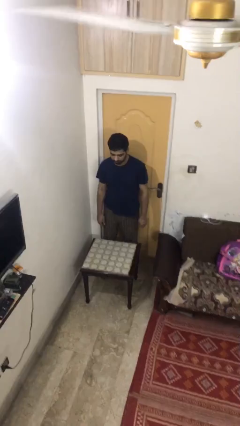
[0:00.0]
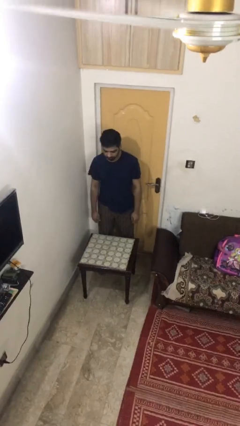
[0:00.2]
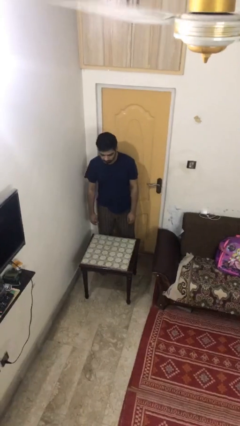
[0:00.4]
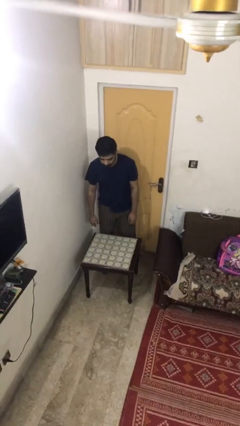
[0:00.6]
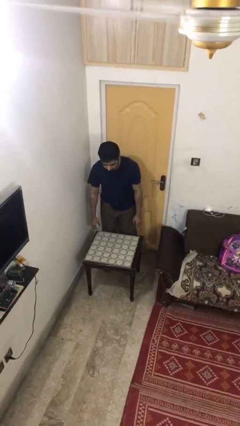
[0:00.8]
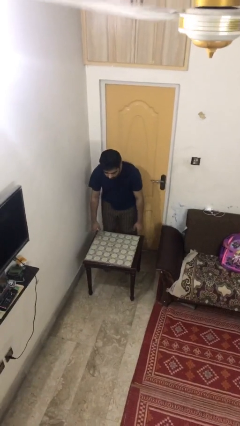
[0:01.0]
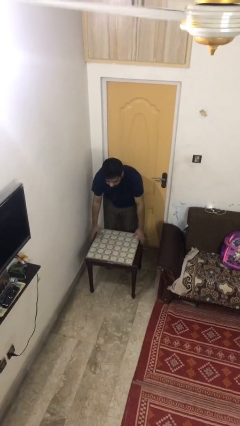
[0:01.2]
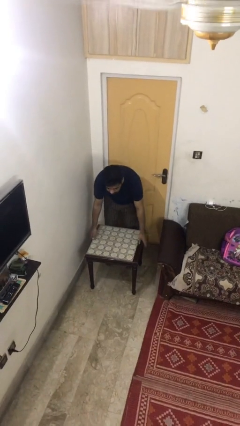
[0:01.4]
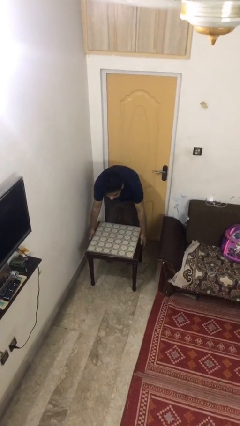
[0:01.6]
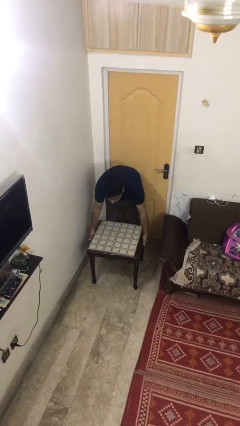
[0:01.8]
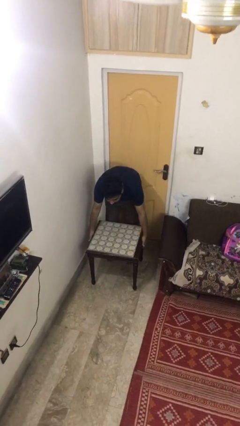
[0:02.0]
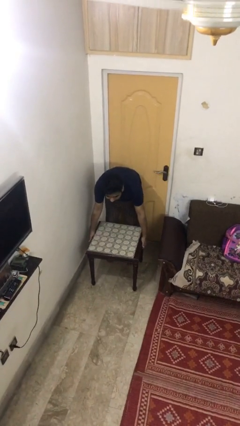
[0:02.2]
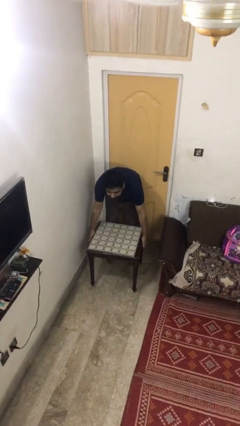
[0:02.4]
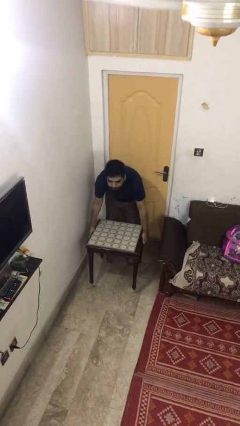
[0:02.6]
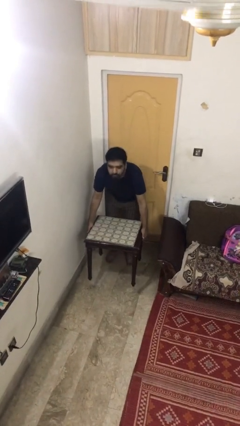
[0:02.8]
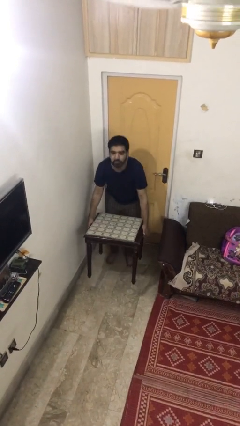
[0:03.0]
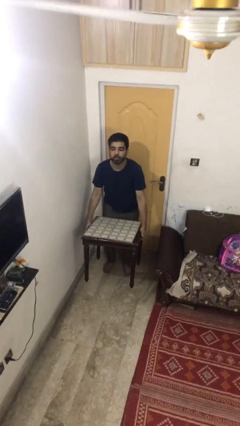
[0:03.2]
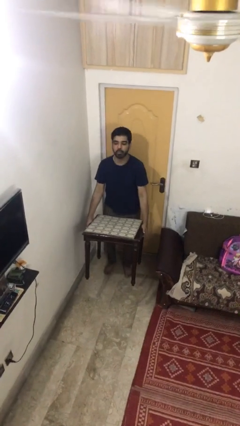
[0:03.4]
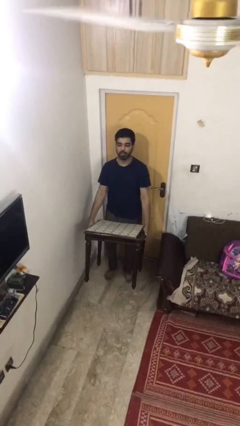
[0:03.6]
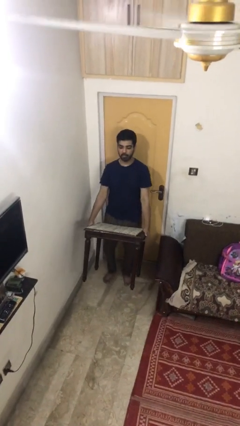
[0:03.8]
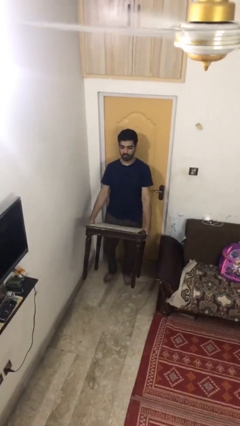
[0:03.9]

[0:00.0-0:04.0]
person picks up object from floor

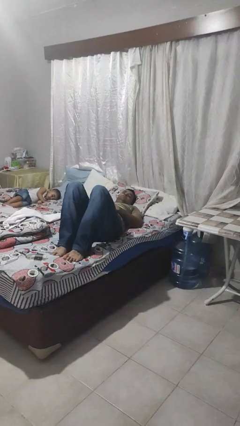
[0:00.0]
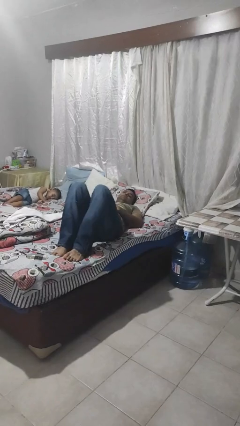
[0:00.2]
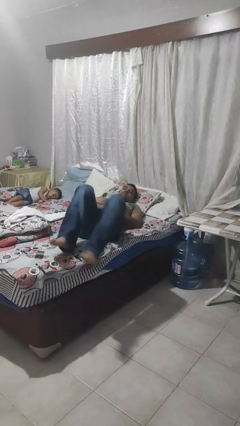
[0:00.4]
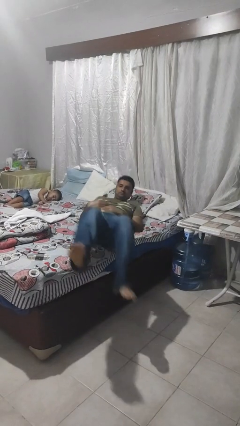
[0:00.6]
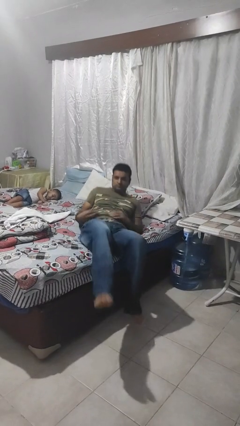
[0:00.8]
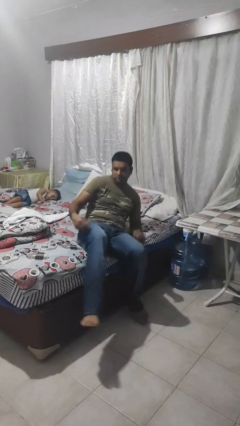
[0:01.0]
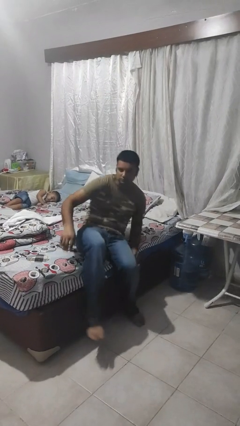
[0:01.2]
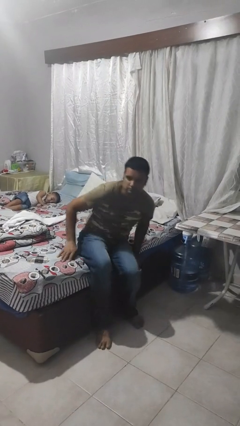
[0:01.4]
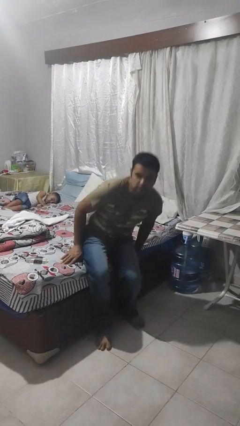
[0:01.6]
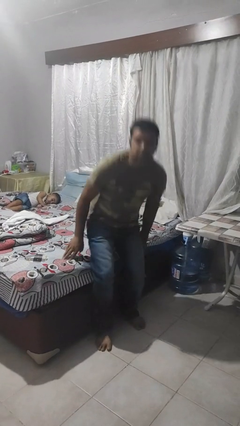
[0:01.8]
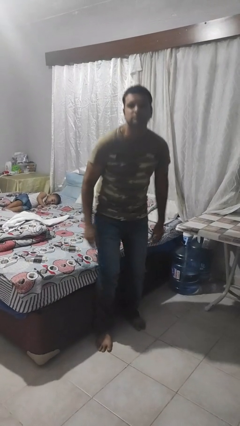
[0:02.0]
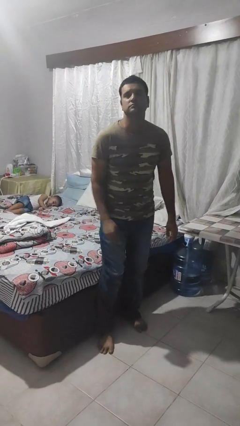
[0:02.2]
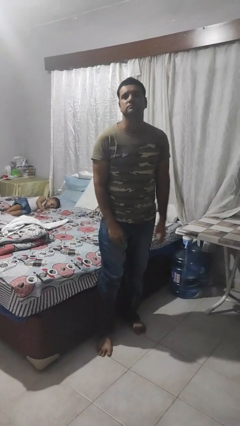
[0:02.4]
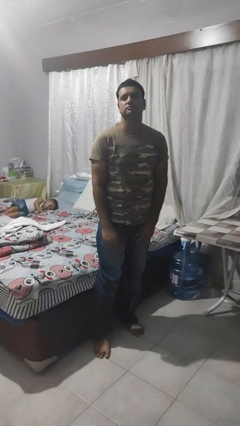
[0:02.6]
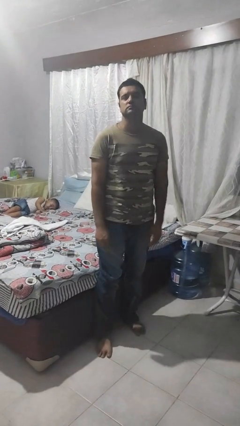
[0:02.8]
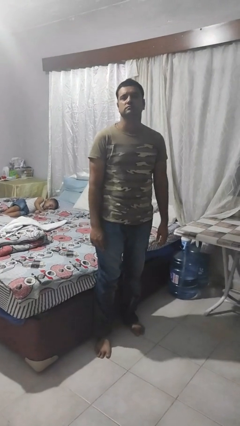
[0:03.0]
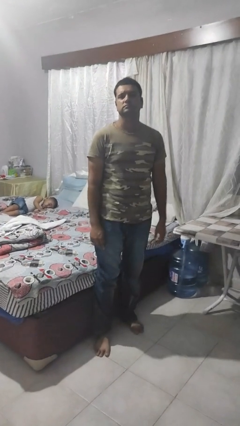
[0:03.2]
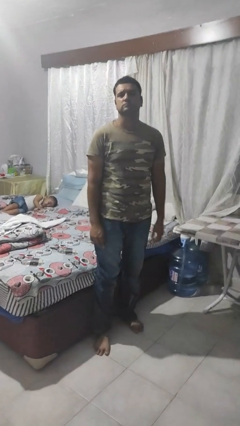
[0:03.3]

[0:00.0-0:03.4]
person stands up

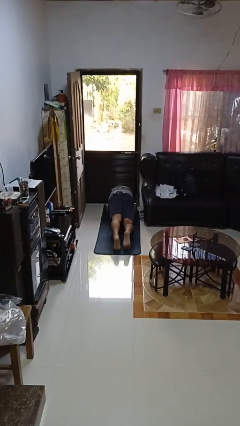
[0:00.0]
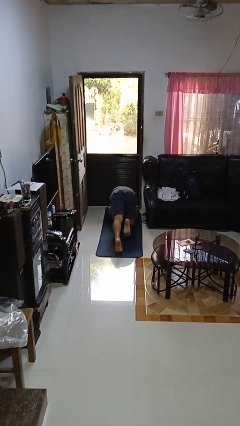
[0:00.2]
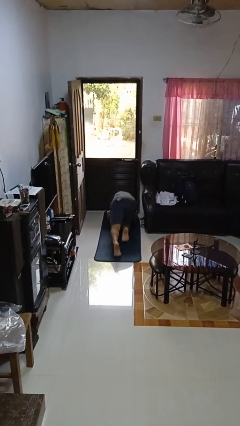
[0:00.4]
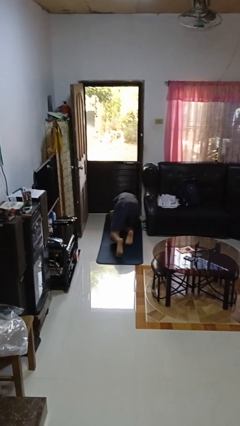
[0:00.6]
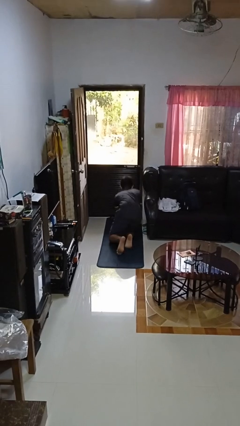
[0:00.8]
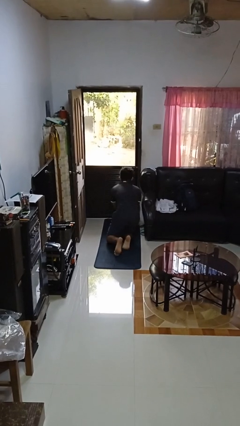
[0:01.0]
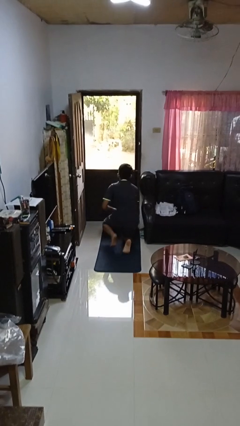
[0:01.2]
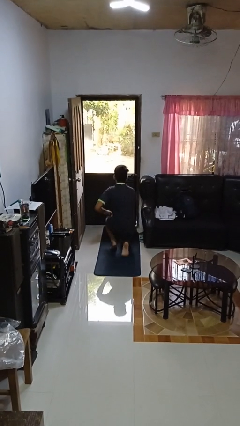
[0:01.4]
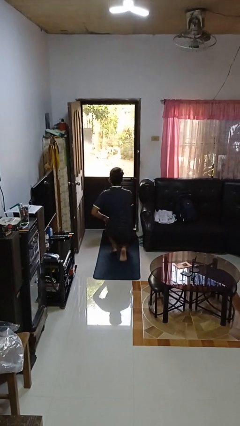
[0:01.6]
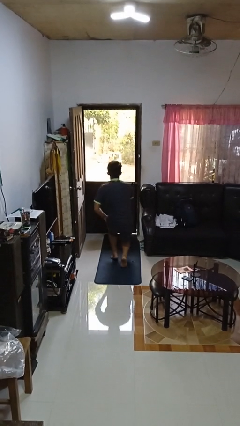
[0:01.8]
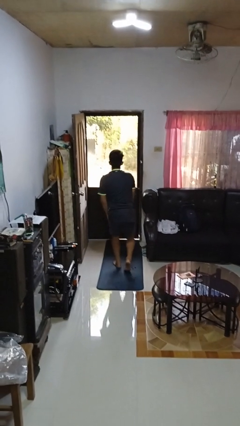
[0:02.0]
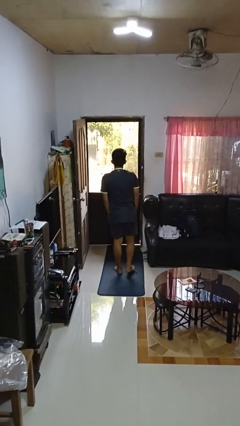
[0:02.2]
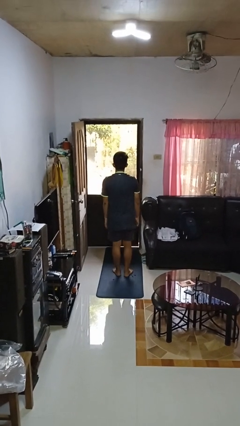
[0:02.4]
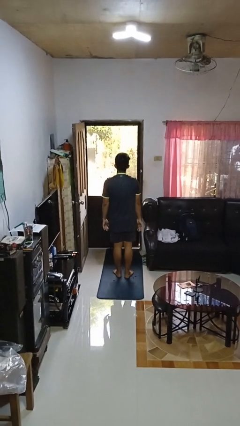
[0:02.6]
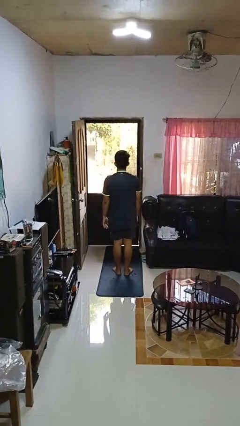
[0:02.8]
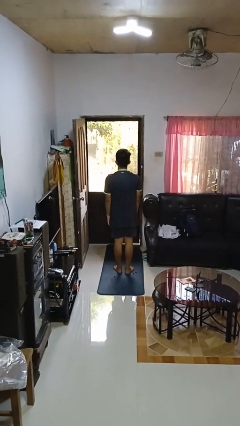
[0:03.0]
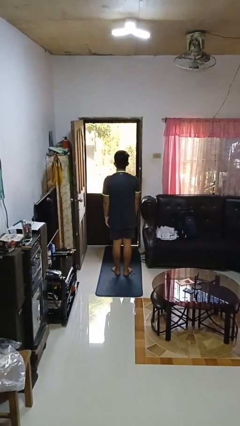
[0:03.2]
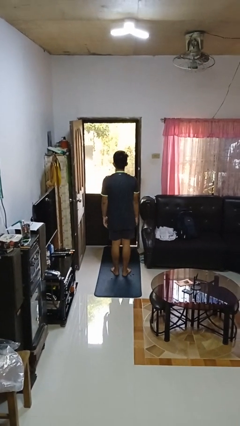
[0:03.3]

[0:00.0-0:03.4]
person stands up from floor

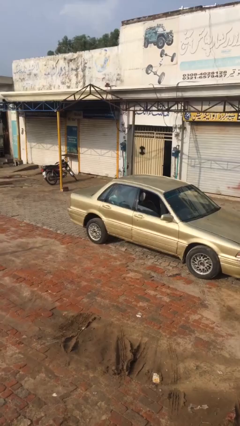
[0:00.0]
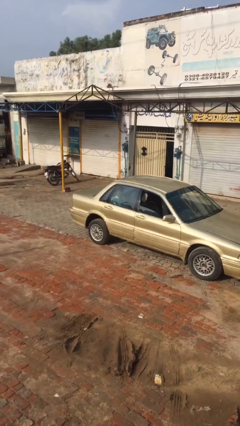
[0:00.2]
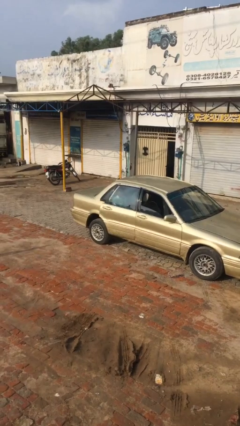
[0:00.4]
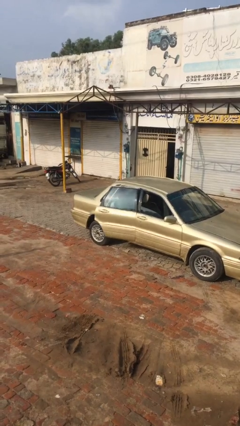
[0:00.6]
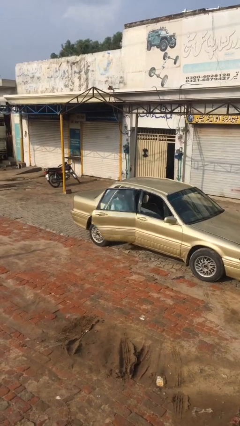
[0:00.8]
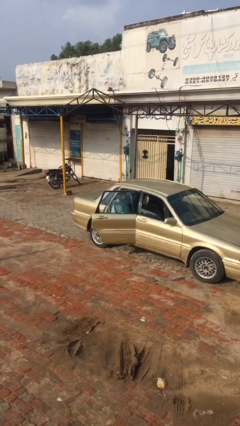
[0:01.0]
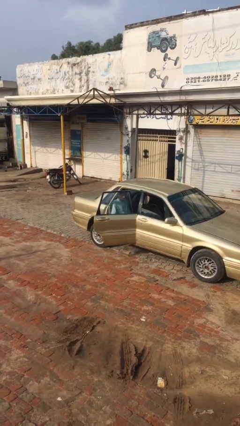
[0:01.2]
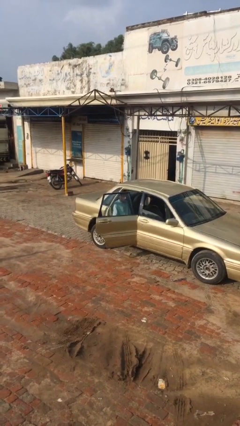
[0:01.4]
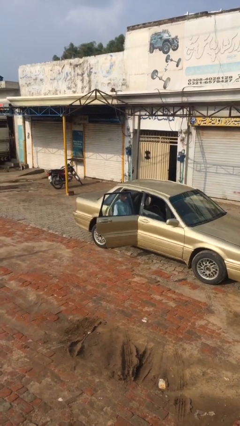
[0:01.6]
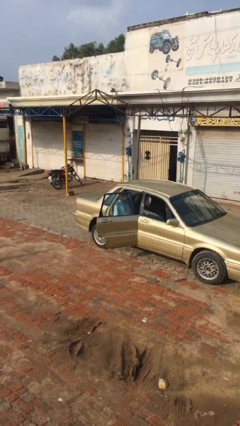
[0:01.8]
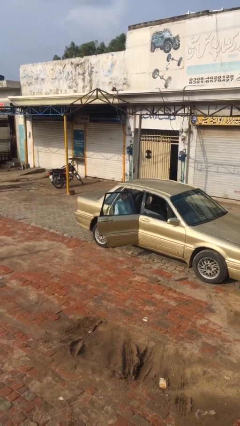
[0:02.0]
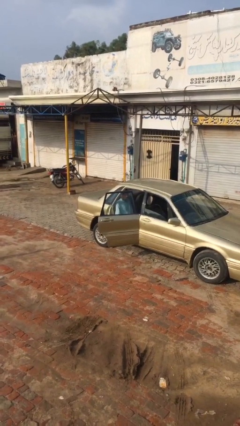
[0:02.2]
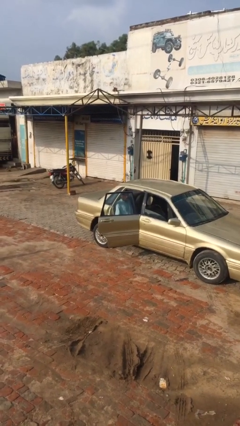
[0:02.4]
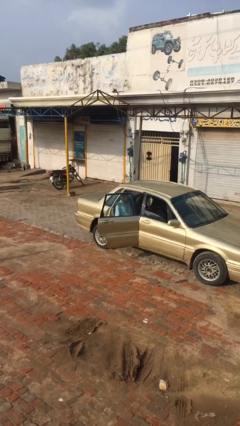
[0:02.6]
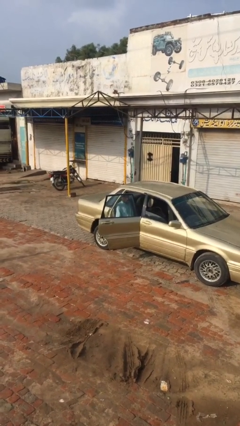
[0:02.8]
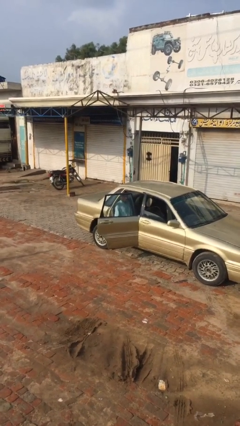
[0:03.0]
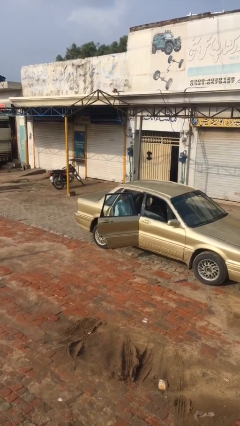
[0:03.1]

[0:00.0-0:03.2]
person opens car door

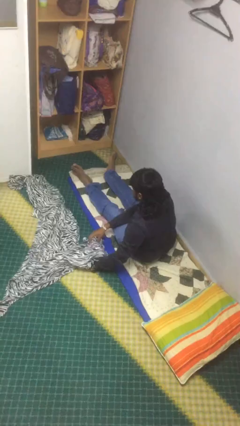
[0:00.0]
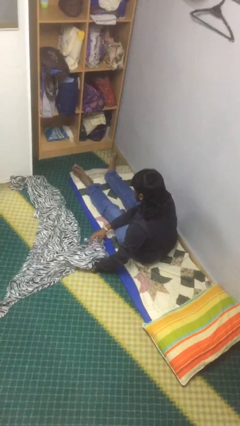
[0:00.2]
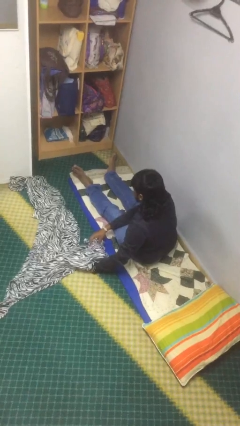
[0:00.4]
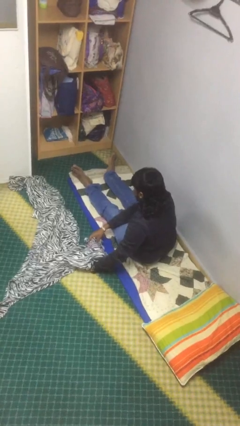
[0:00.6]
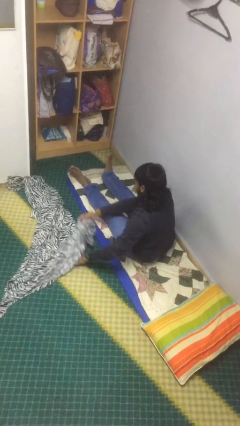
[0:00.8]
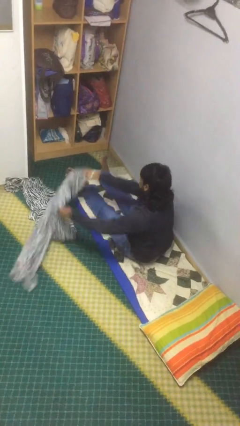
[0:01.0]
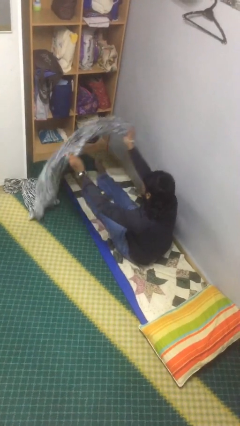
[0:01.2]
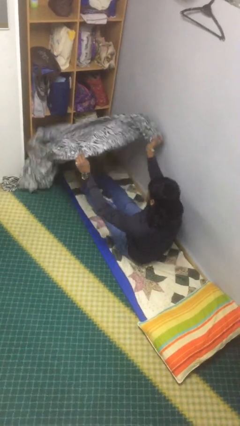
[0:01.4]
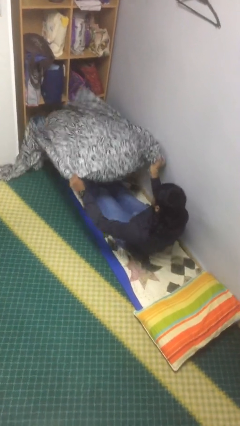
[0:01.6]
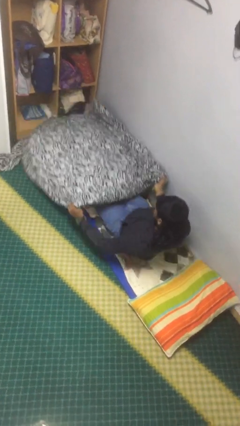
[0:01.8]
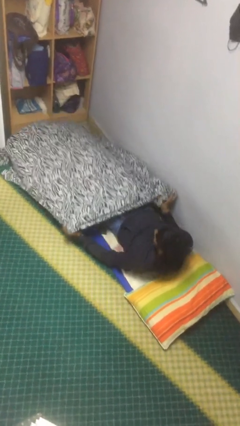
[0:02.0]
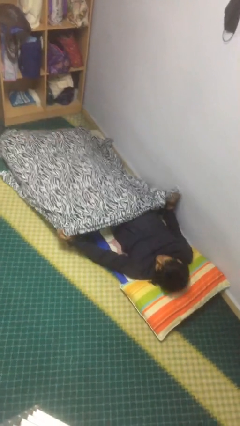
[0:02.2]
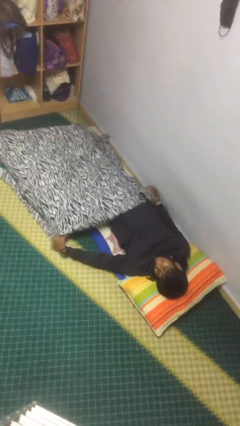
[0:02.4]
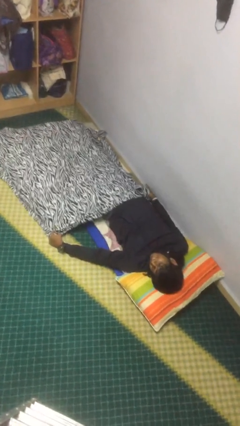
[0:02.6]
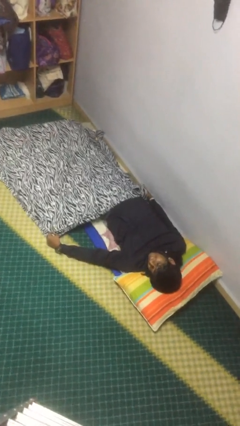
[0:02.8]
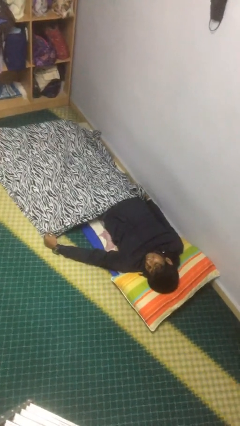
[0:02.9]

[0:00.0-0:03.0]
person covers with blanket

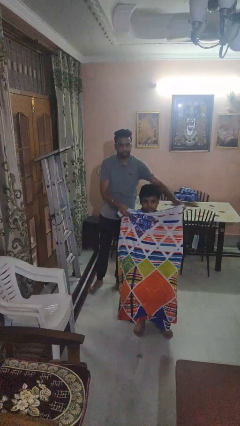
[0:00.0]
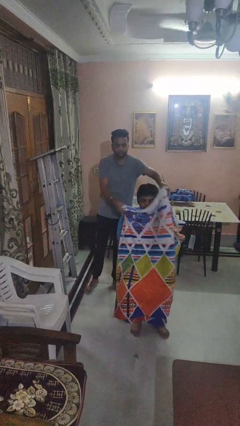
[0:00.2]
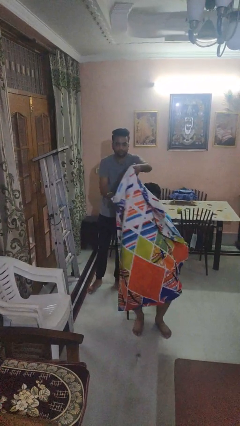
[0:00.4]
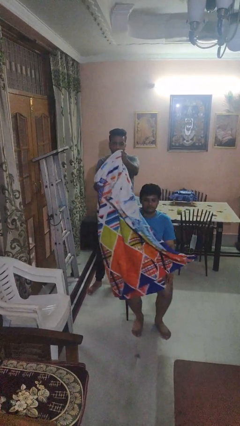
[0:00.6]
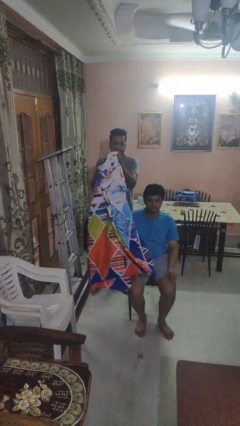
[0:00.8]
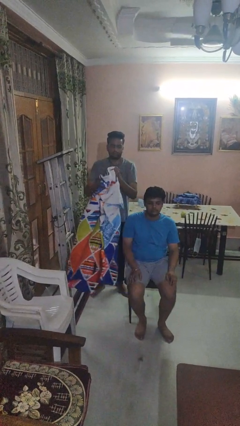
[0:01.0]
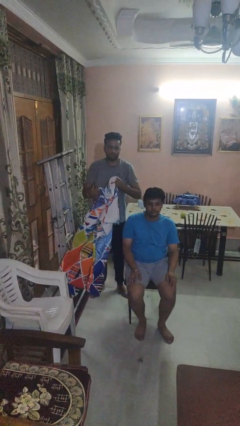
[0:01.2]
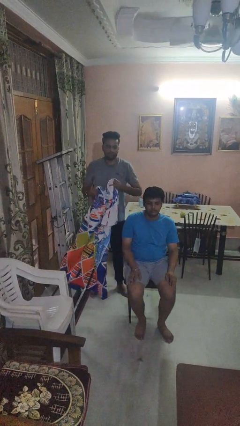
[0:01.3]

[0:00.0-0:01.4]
person uncovers friend with blanket
